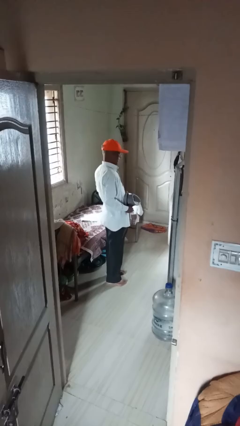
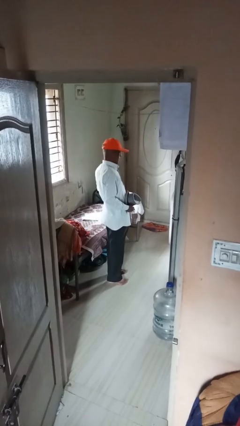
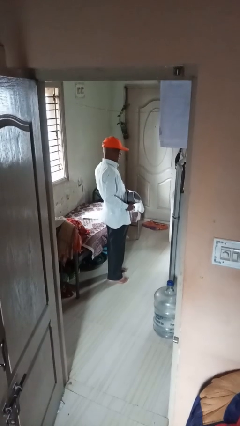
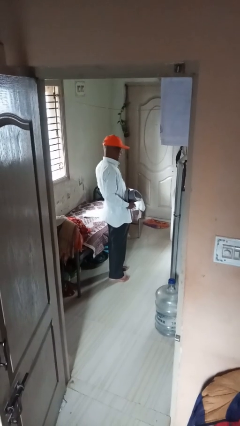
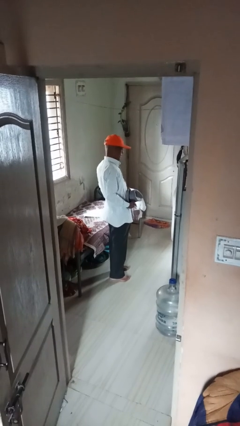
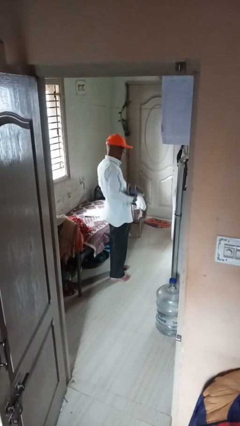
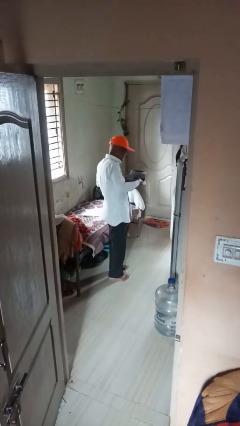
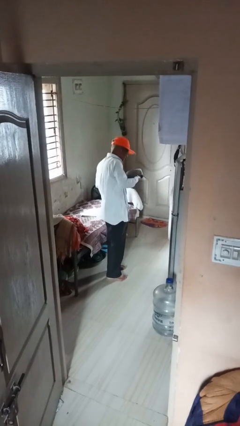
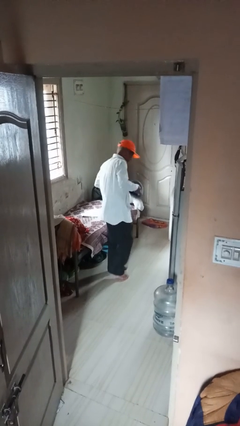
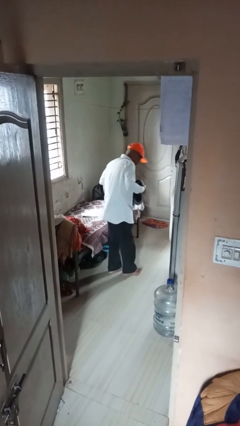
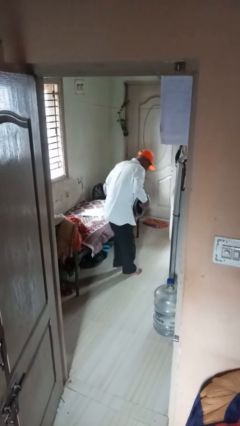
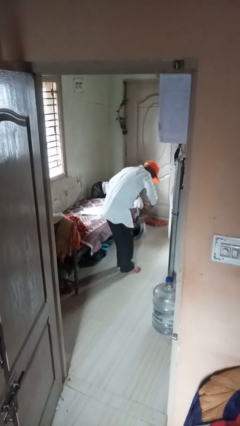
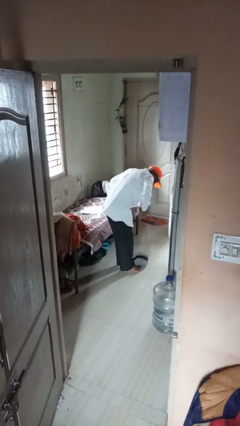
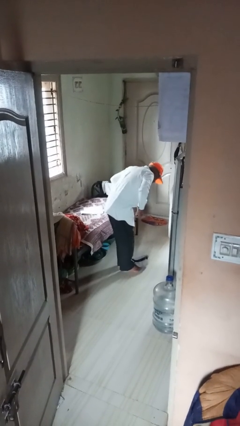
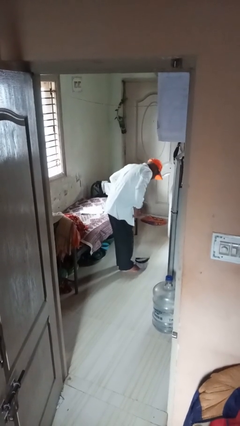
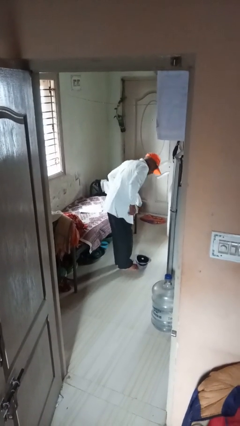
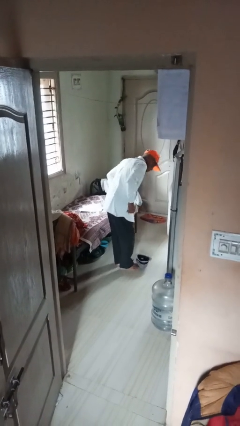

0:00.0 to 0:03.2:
person drops object

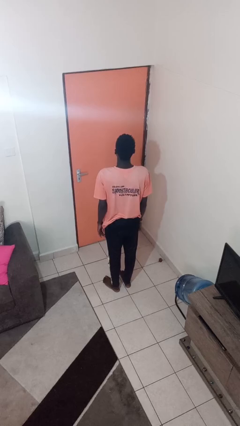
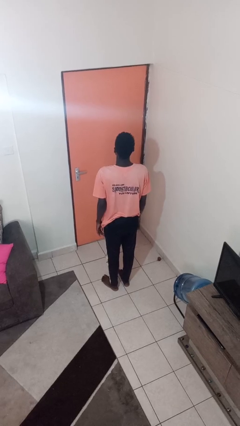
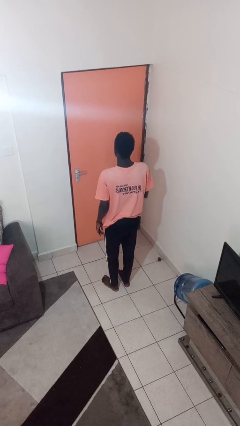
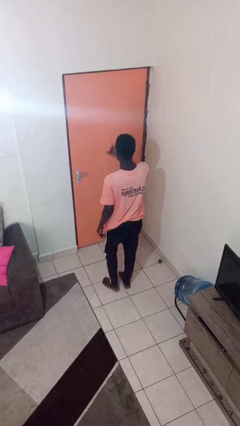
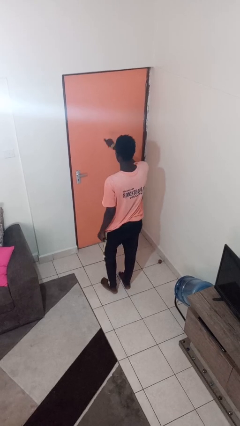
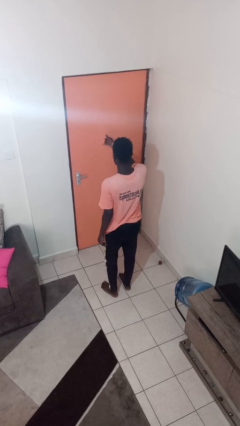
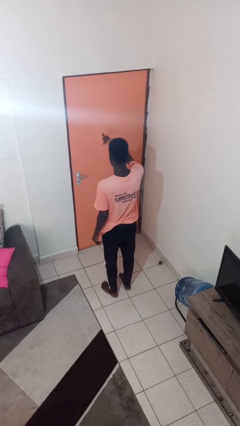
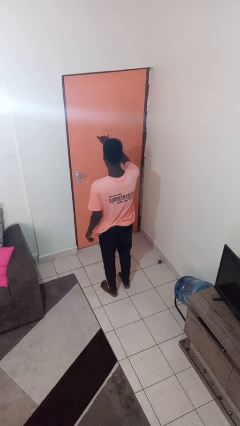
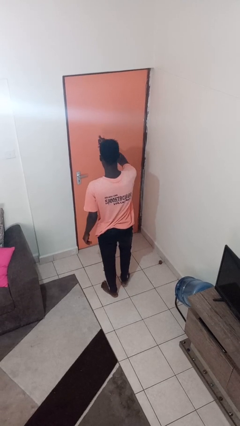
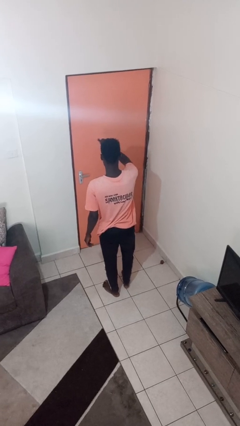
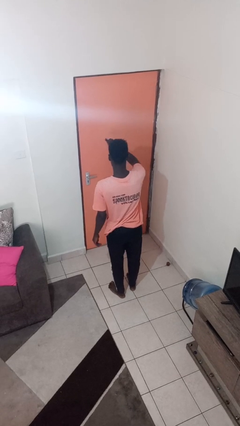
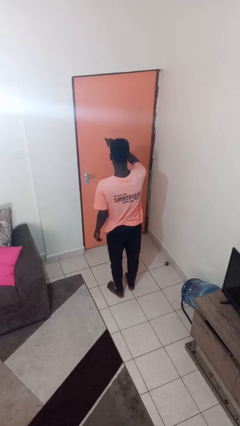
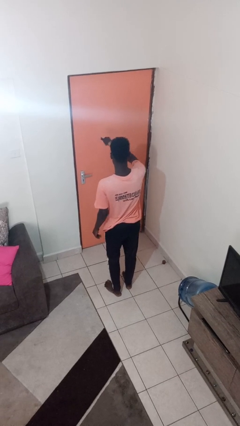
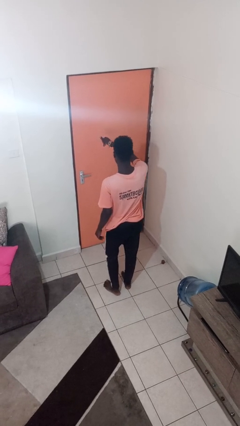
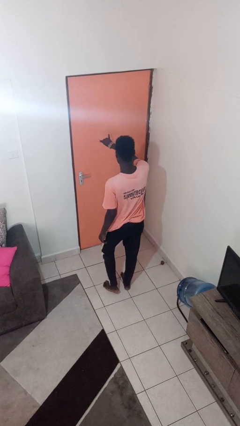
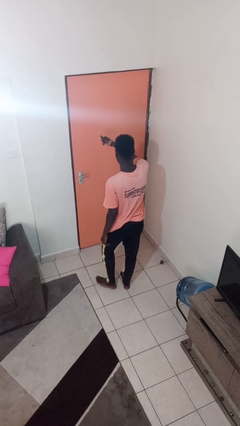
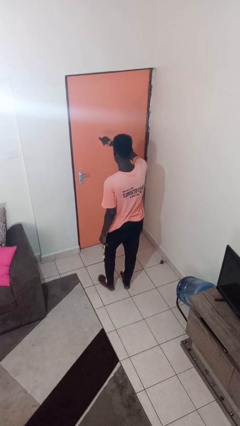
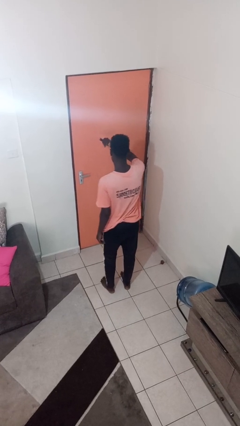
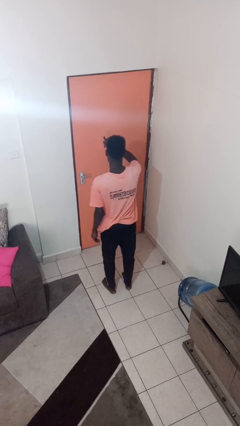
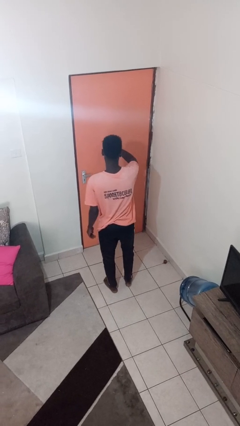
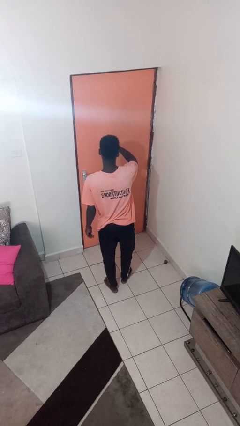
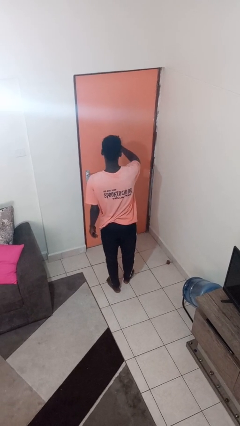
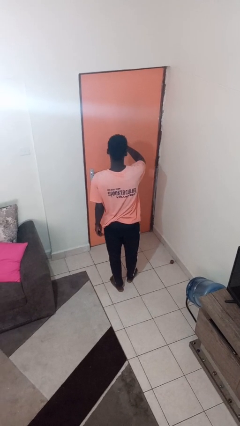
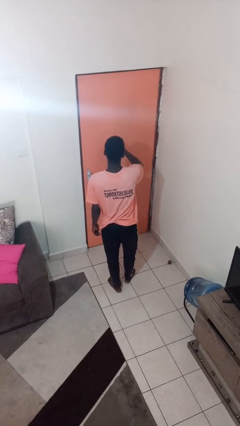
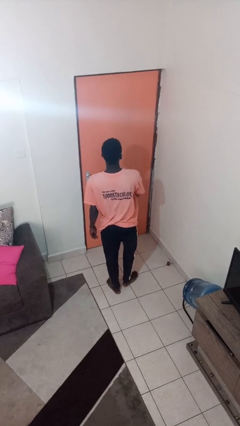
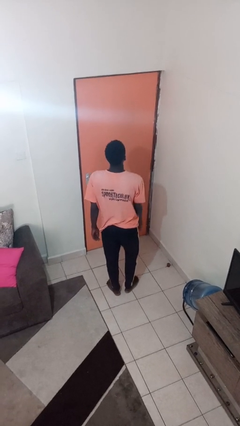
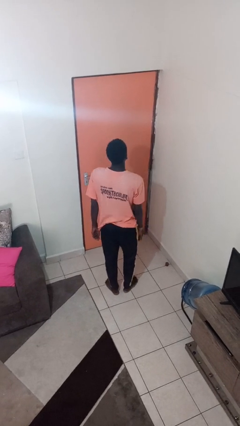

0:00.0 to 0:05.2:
person gestures hang loose

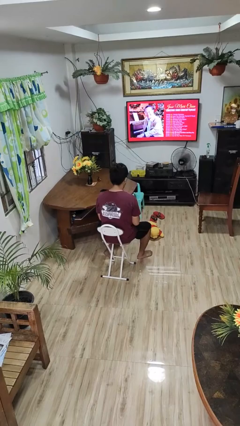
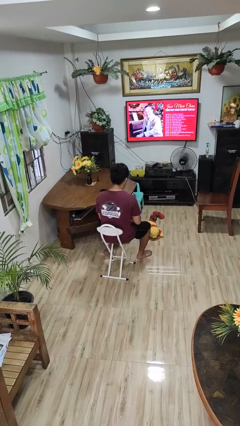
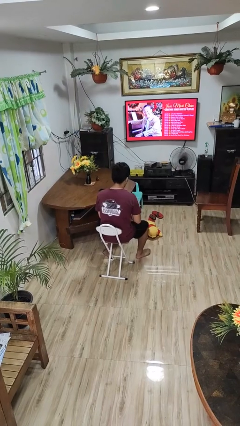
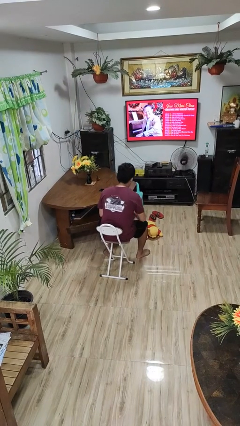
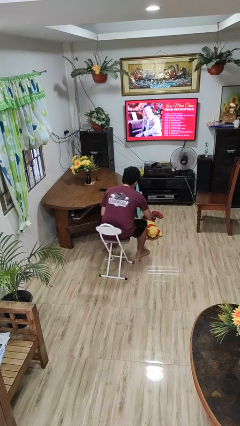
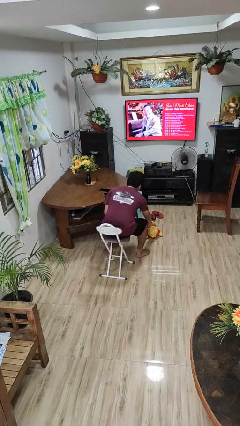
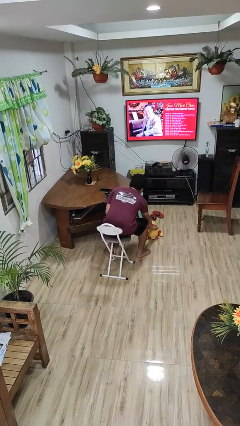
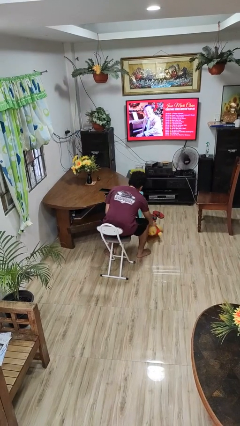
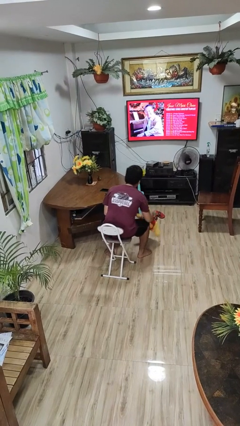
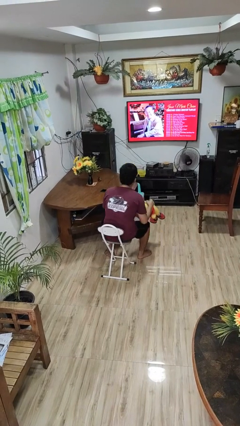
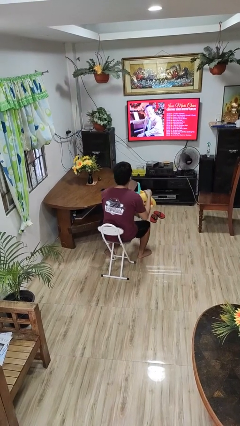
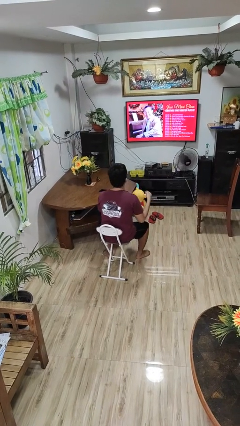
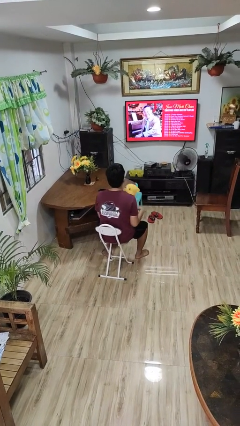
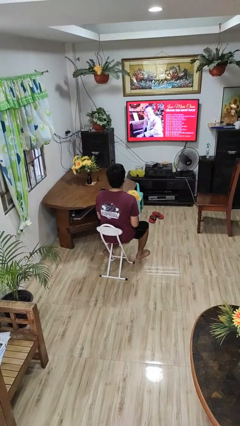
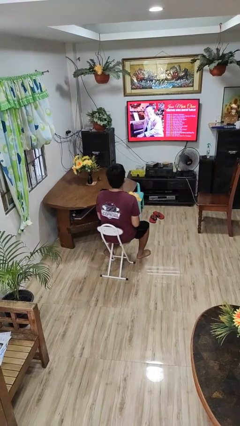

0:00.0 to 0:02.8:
person picks up object from floor

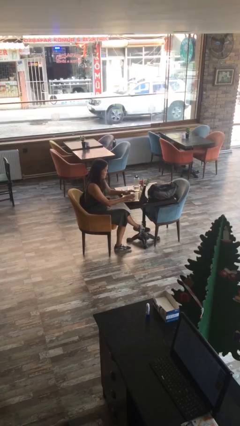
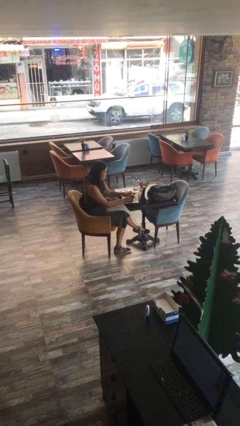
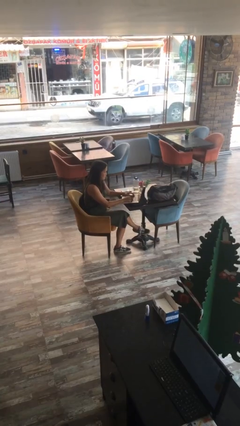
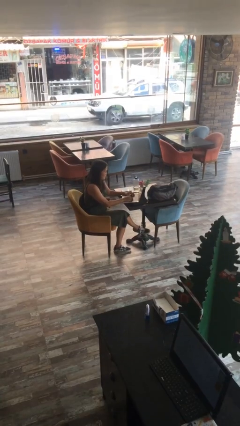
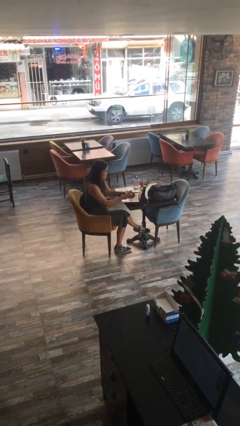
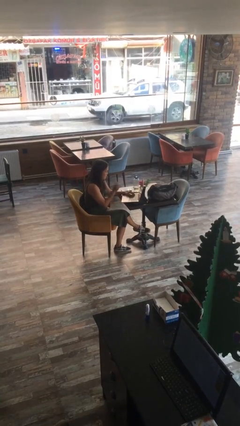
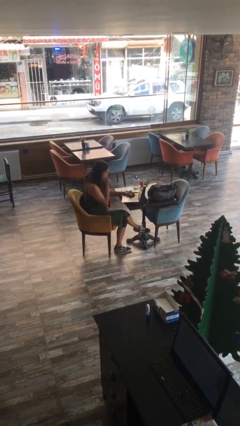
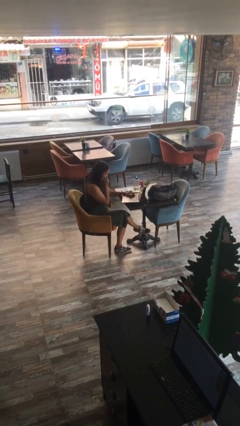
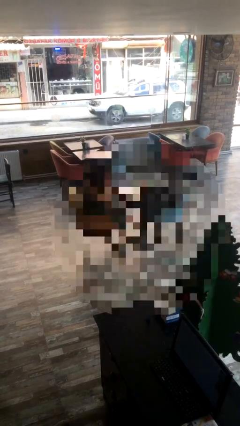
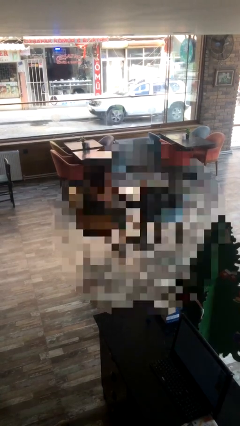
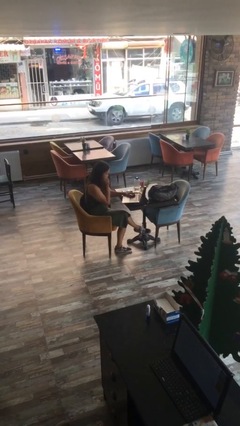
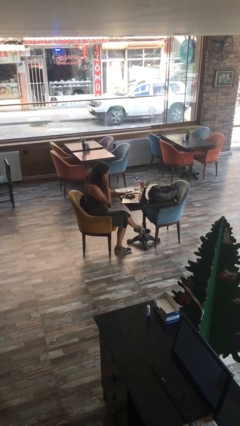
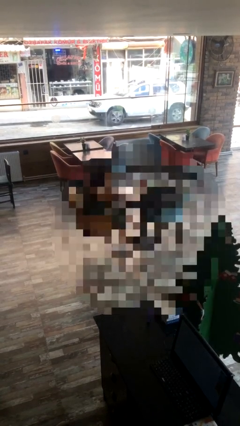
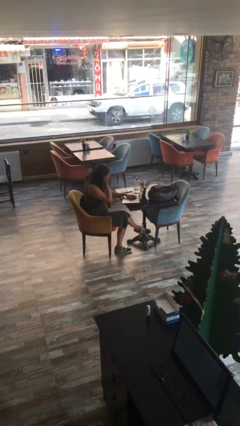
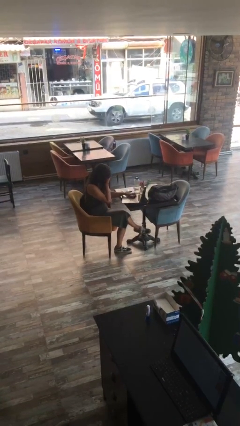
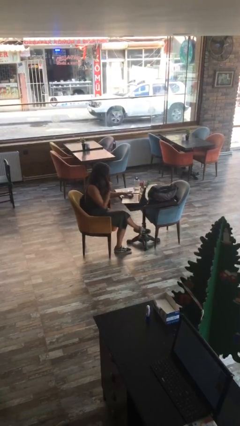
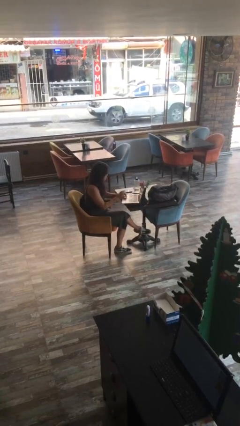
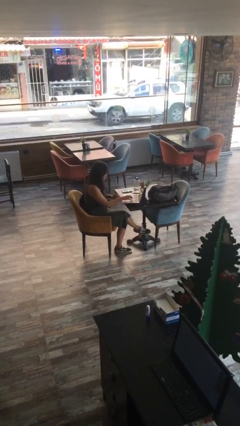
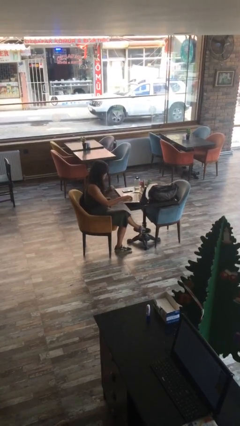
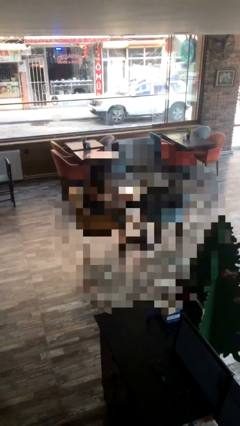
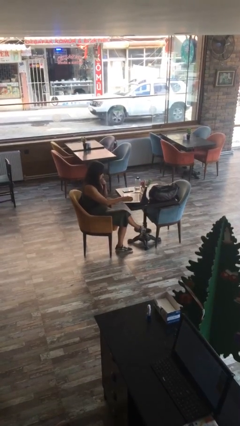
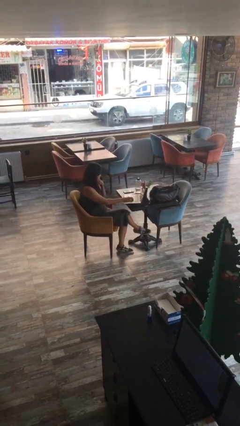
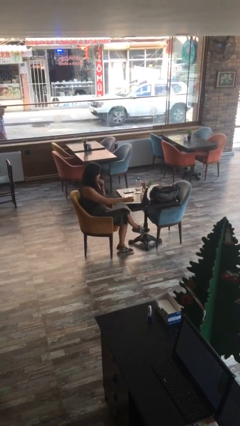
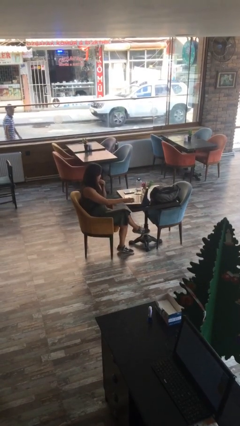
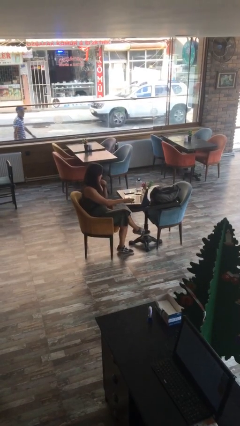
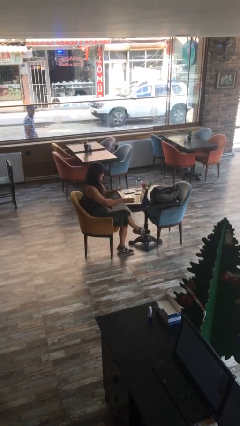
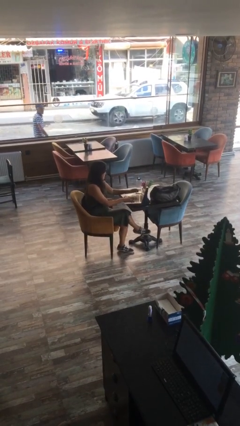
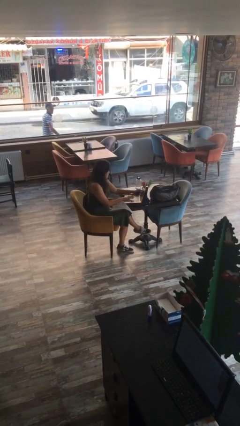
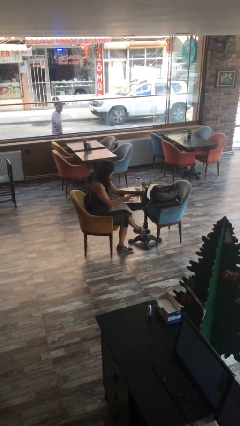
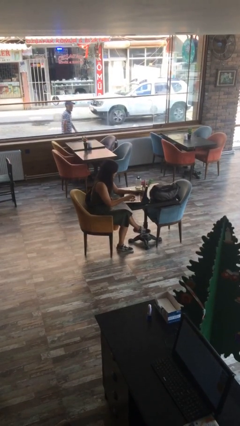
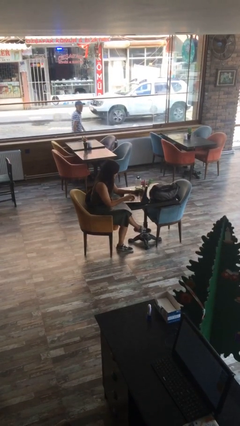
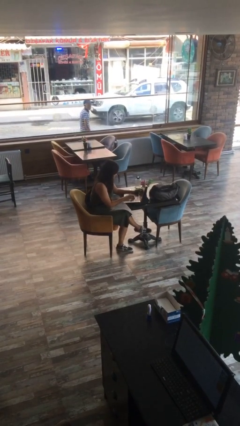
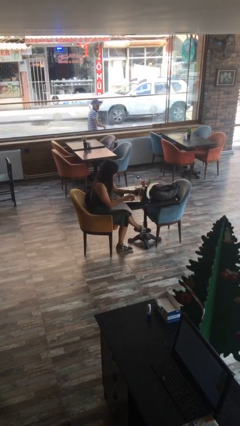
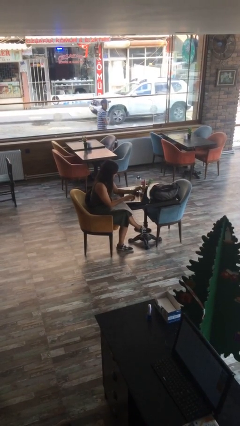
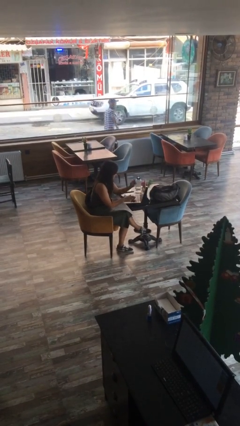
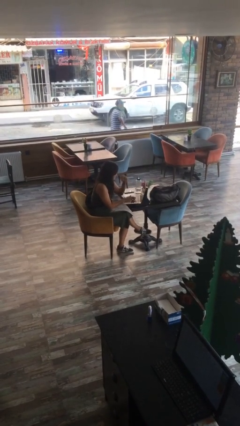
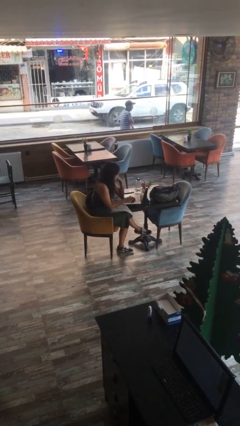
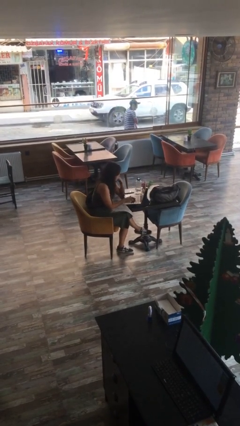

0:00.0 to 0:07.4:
person interacts with laptop
